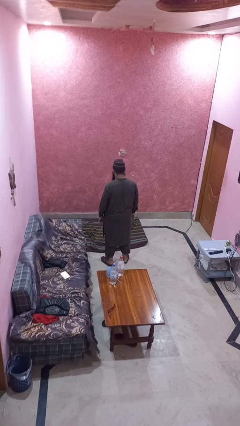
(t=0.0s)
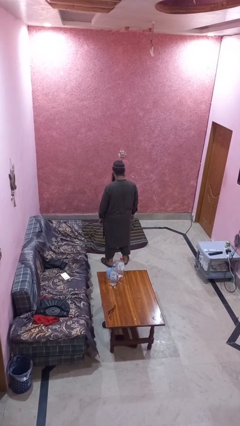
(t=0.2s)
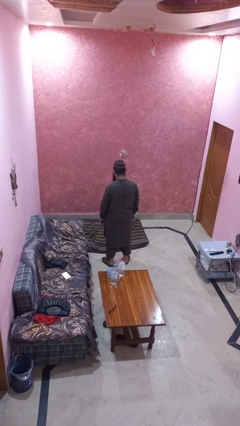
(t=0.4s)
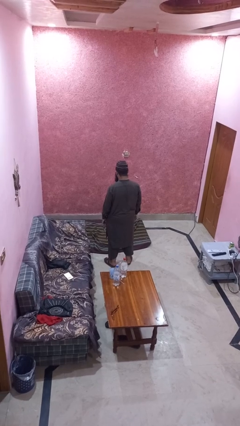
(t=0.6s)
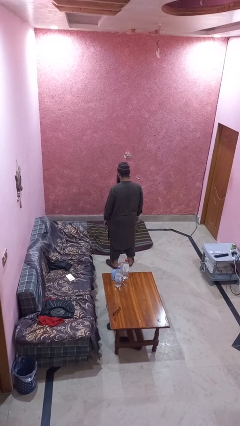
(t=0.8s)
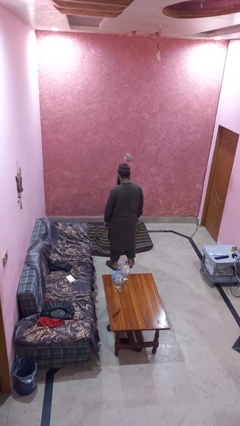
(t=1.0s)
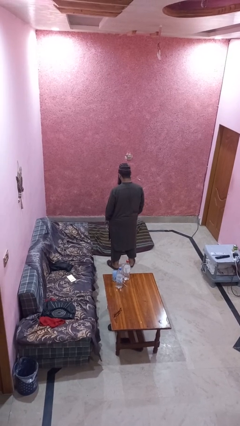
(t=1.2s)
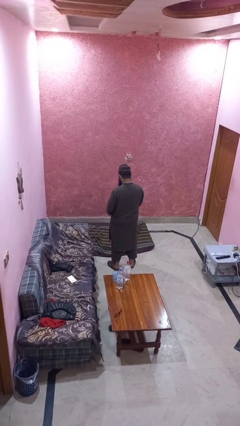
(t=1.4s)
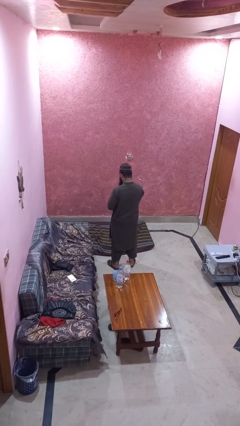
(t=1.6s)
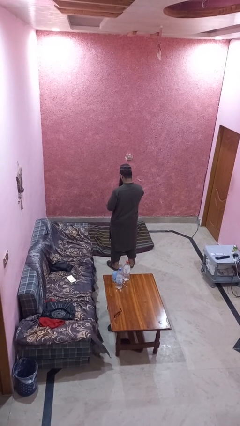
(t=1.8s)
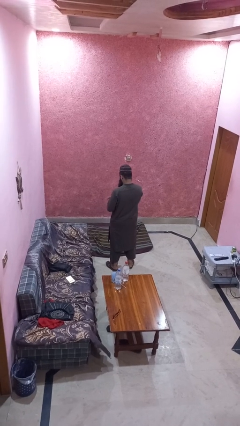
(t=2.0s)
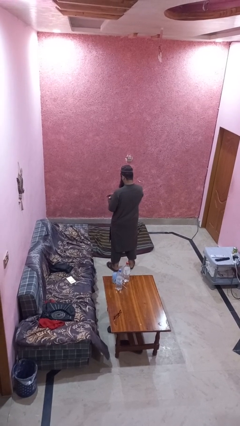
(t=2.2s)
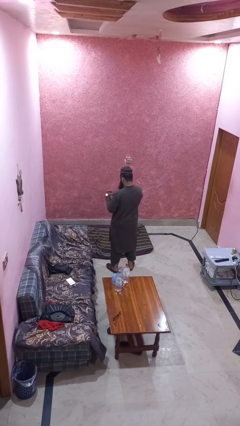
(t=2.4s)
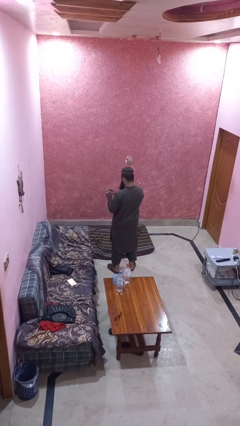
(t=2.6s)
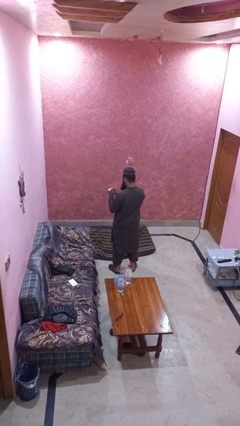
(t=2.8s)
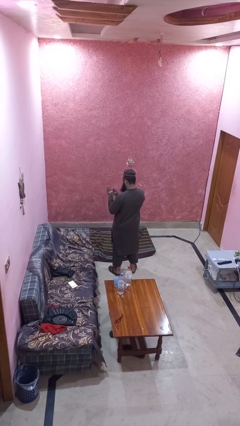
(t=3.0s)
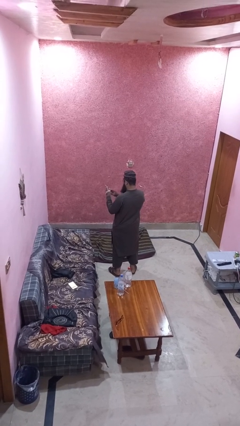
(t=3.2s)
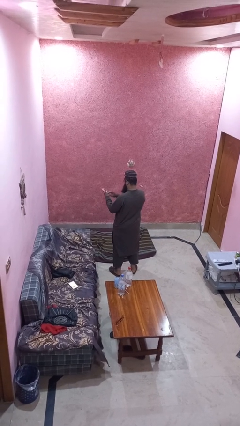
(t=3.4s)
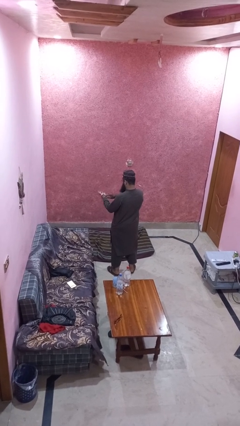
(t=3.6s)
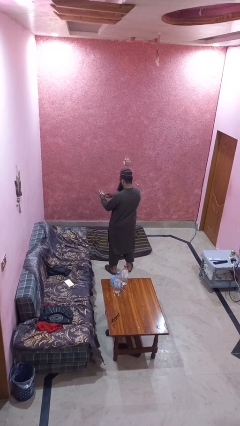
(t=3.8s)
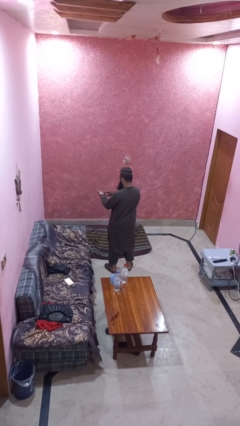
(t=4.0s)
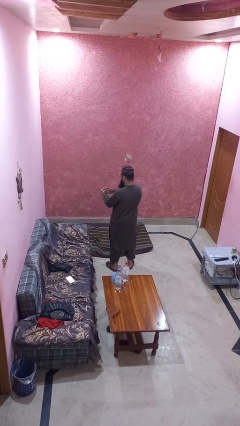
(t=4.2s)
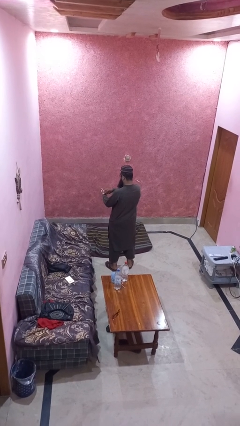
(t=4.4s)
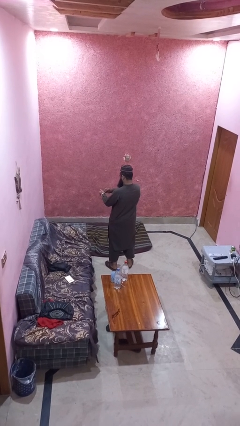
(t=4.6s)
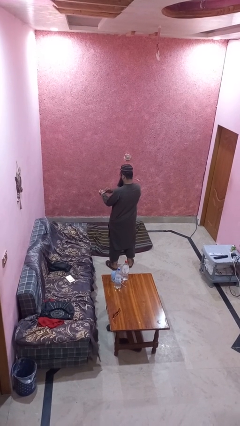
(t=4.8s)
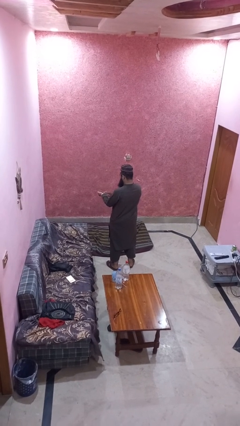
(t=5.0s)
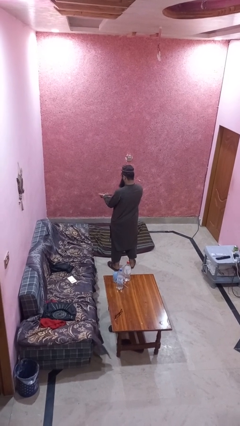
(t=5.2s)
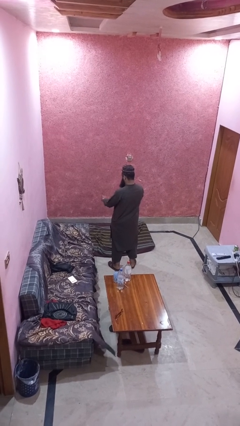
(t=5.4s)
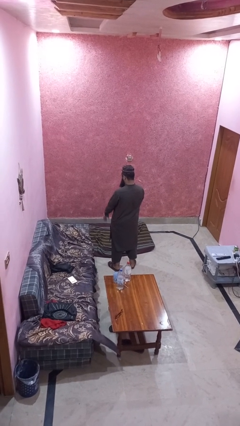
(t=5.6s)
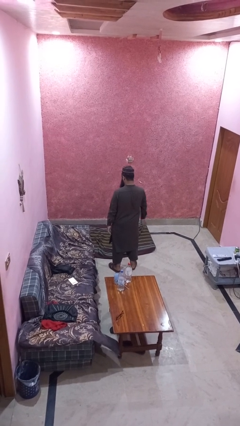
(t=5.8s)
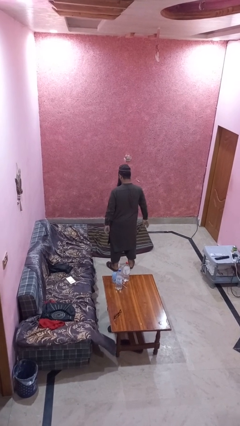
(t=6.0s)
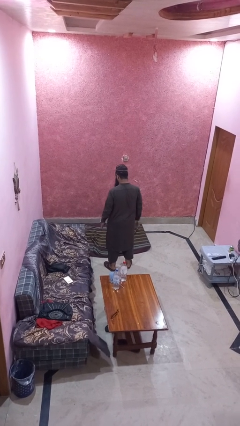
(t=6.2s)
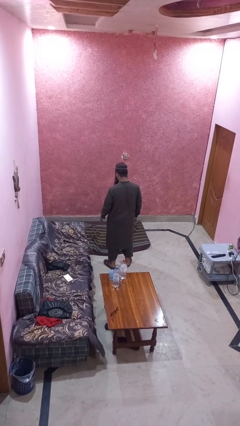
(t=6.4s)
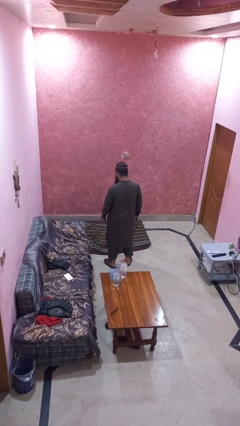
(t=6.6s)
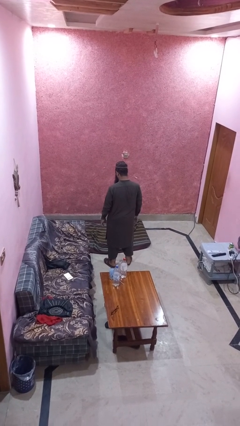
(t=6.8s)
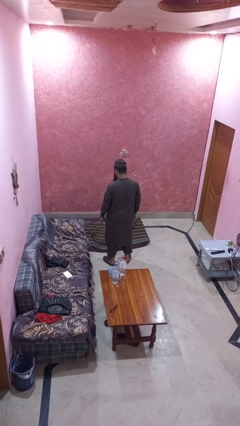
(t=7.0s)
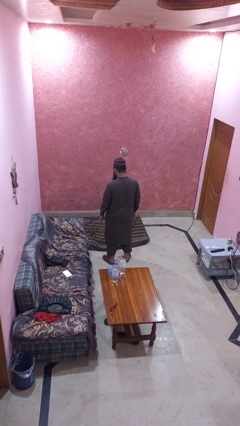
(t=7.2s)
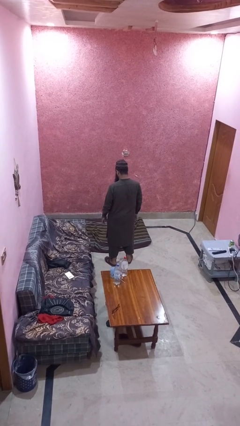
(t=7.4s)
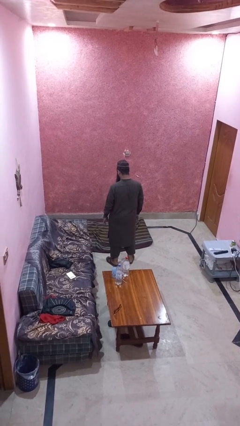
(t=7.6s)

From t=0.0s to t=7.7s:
person puts on wristwatch

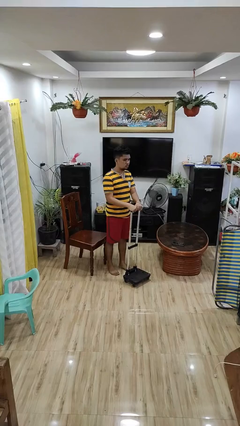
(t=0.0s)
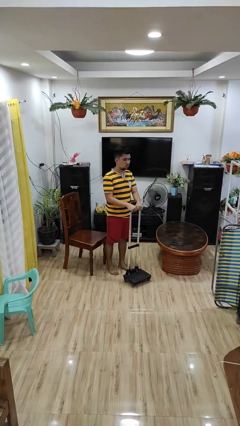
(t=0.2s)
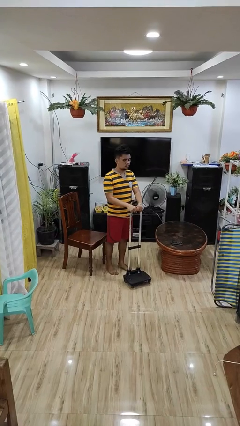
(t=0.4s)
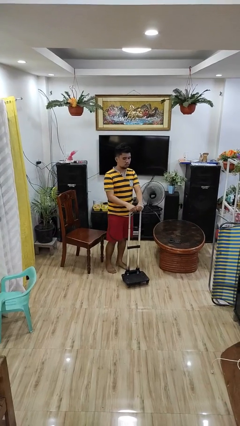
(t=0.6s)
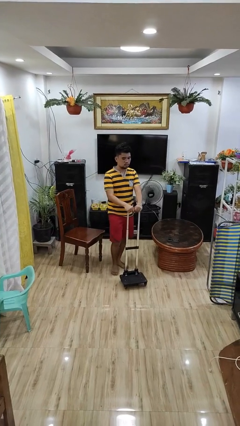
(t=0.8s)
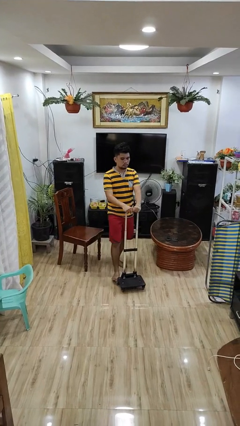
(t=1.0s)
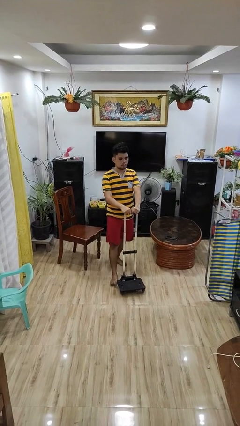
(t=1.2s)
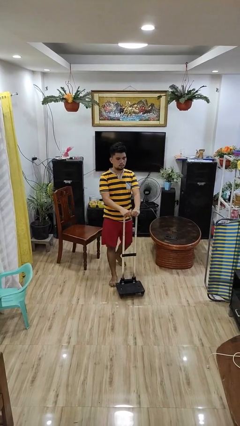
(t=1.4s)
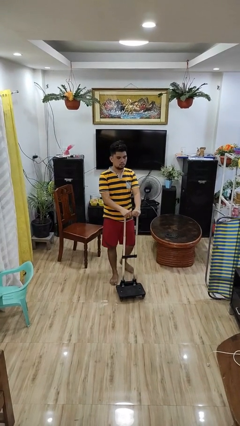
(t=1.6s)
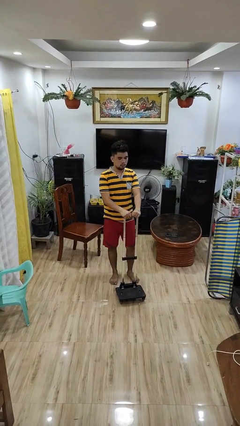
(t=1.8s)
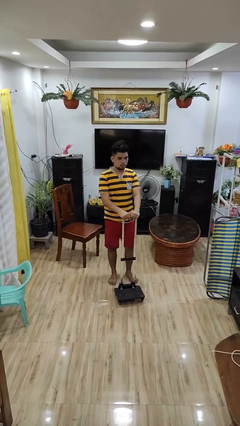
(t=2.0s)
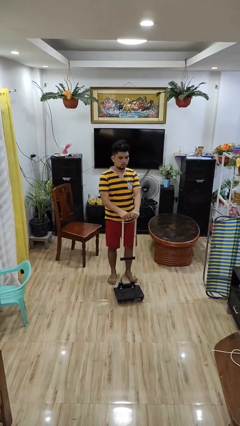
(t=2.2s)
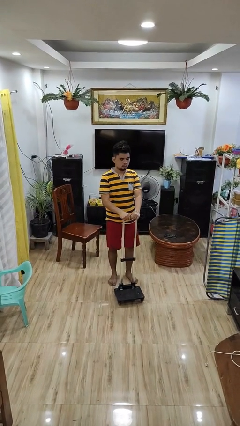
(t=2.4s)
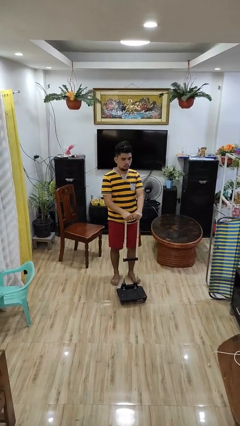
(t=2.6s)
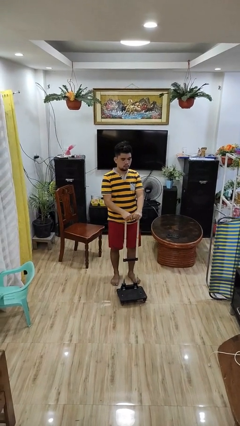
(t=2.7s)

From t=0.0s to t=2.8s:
person pushes wheeled cart

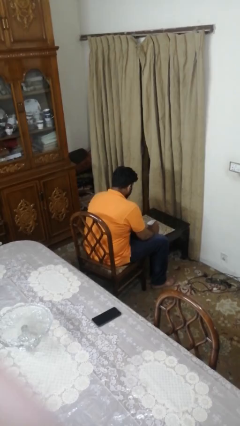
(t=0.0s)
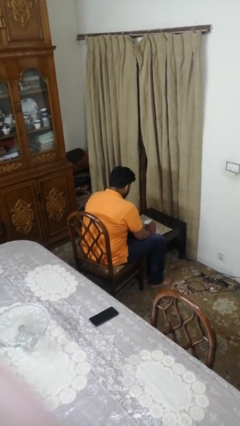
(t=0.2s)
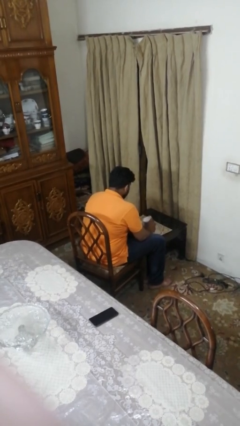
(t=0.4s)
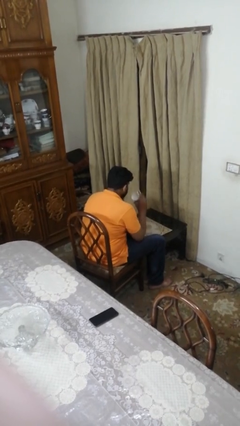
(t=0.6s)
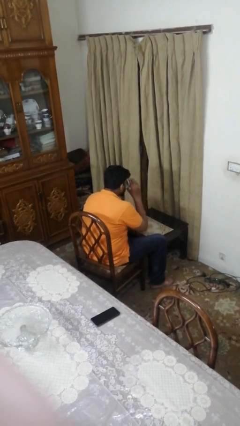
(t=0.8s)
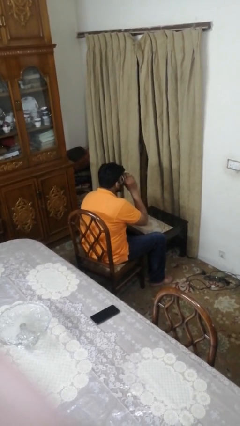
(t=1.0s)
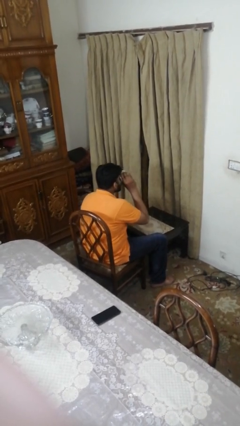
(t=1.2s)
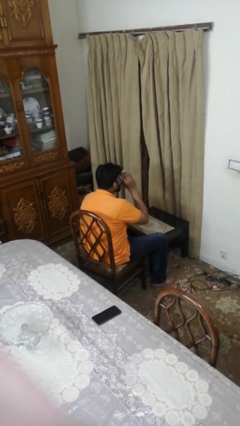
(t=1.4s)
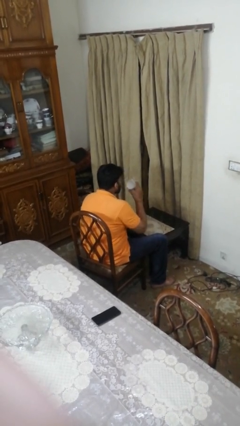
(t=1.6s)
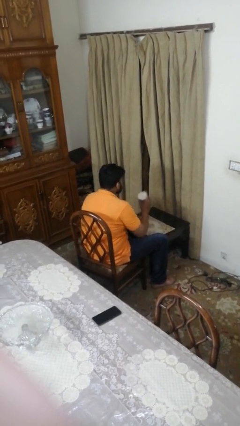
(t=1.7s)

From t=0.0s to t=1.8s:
person drinks from mug

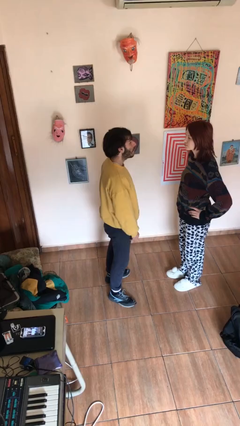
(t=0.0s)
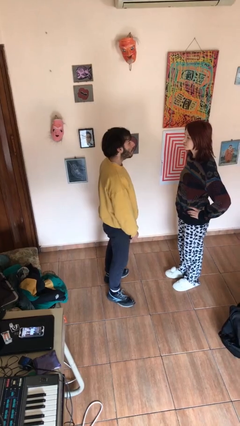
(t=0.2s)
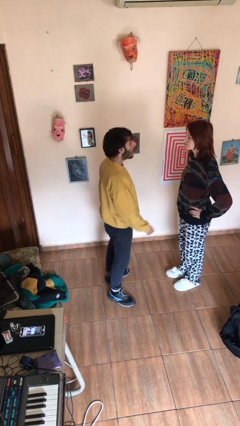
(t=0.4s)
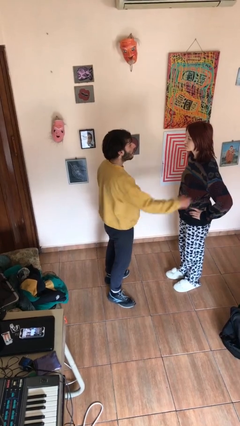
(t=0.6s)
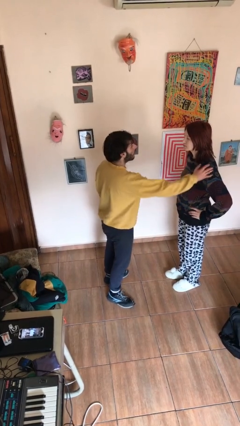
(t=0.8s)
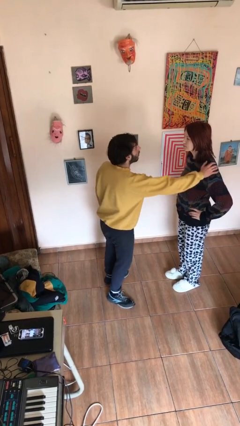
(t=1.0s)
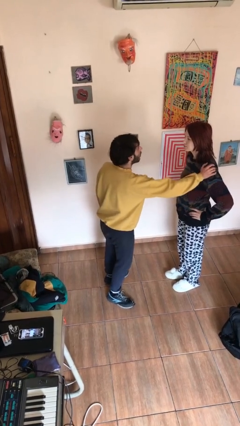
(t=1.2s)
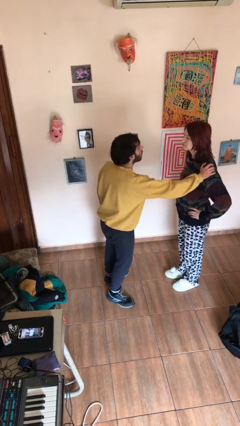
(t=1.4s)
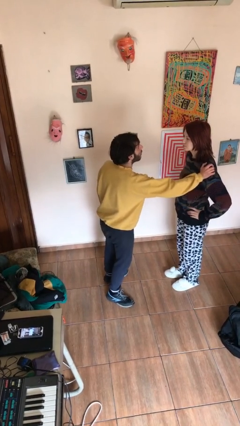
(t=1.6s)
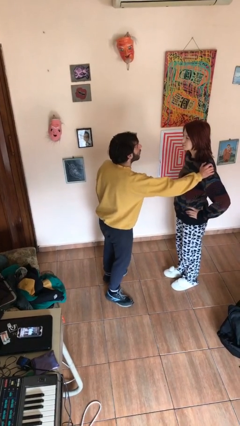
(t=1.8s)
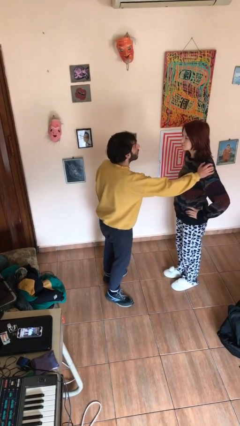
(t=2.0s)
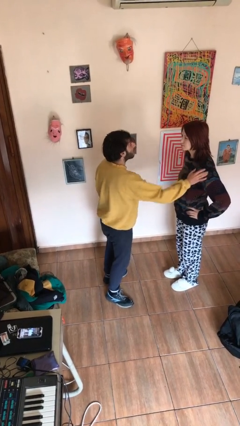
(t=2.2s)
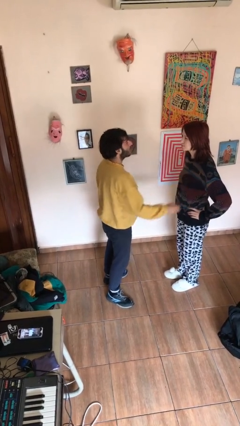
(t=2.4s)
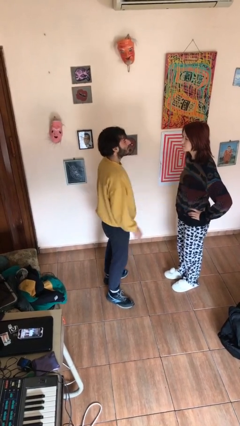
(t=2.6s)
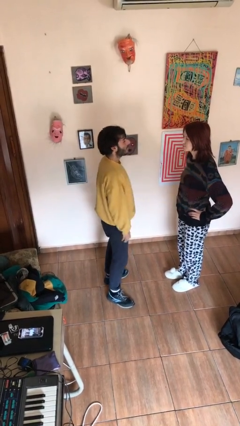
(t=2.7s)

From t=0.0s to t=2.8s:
person pounds shoulders of person

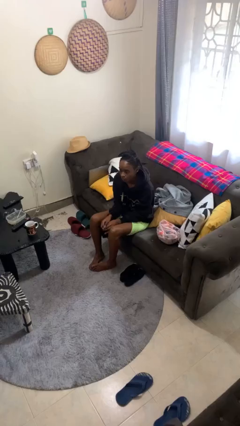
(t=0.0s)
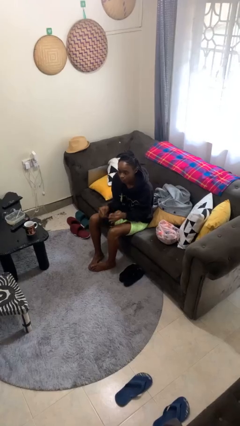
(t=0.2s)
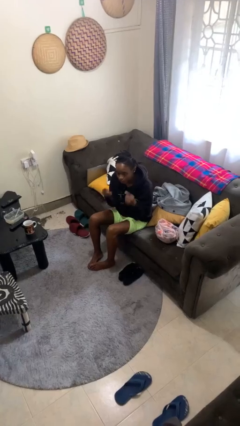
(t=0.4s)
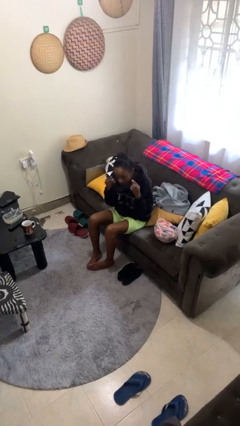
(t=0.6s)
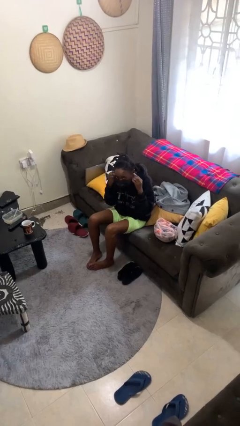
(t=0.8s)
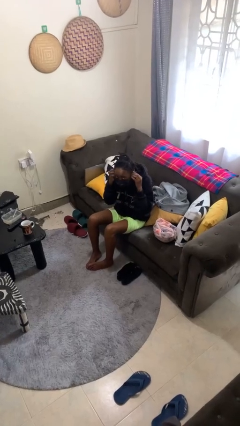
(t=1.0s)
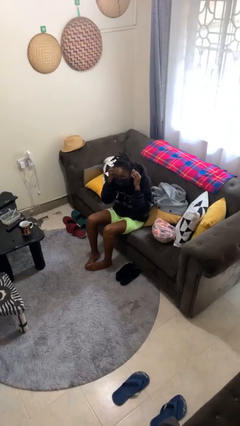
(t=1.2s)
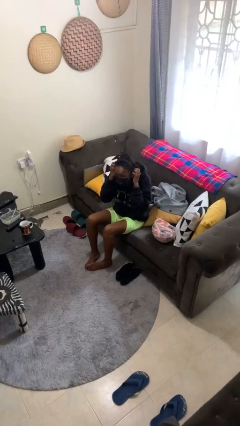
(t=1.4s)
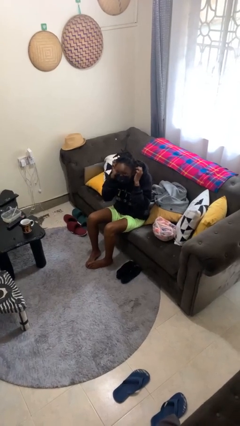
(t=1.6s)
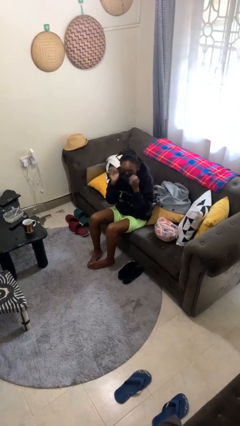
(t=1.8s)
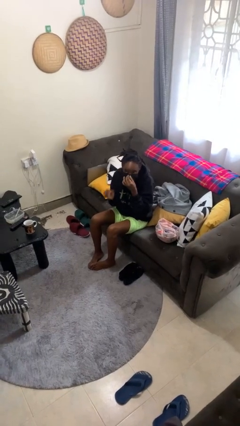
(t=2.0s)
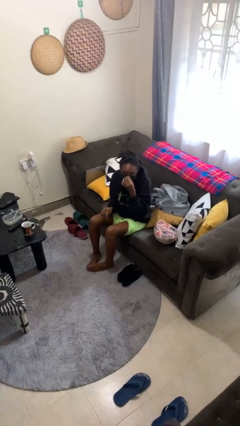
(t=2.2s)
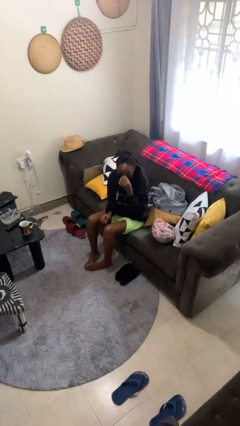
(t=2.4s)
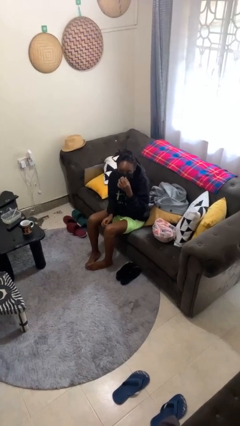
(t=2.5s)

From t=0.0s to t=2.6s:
person puts on facemask
